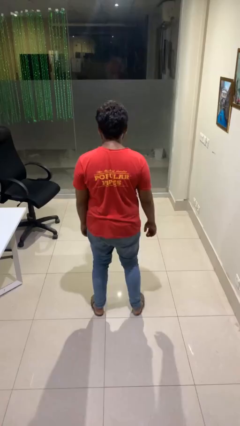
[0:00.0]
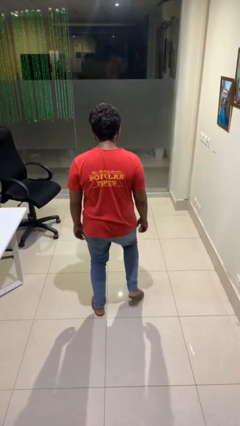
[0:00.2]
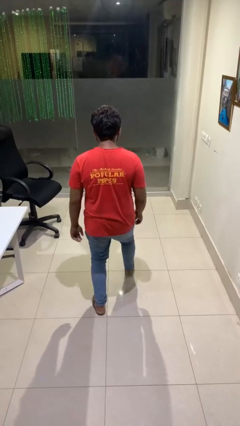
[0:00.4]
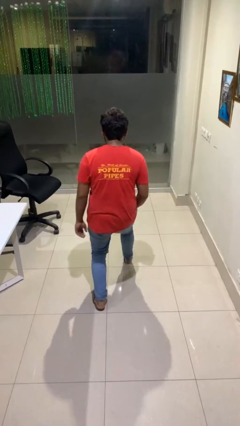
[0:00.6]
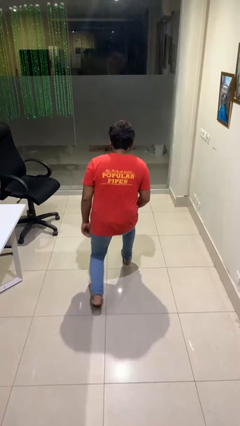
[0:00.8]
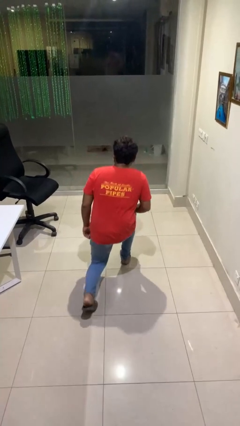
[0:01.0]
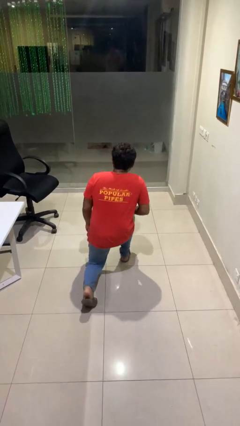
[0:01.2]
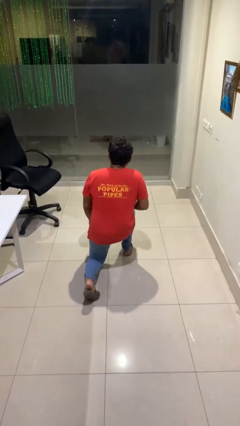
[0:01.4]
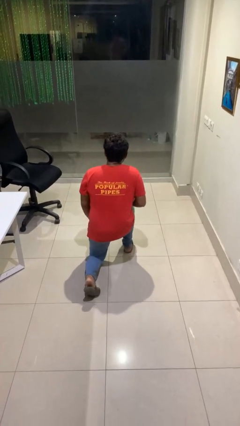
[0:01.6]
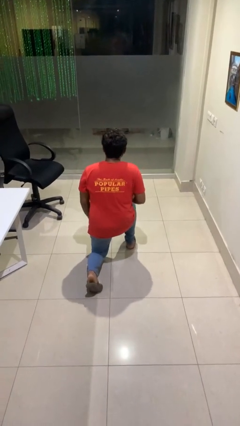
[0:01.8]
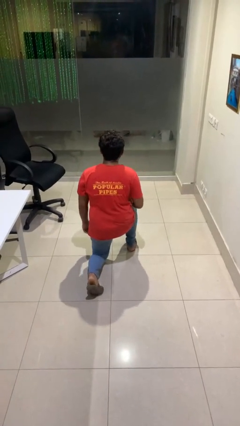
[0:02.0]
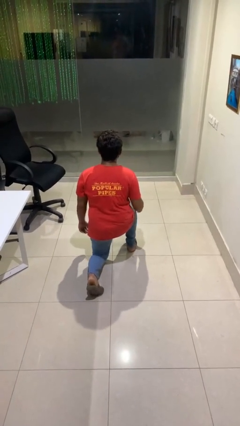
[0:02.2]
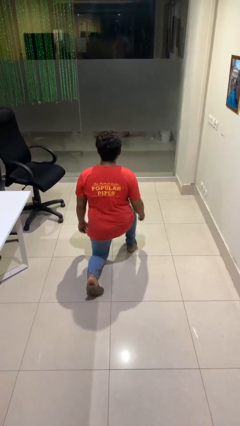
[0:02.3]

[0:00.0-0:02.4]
person kneels

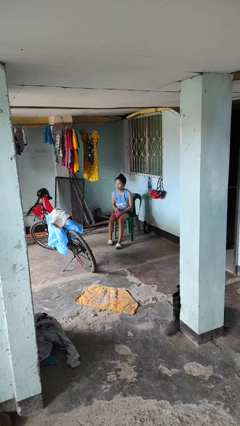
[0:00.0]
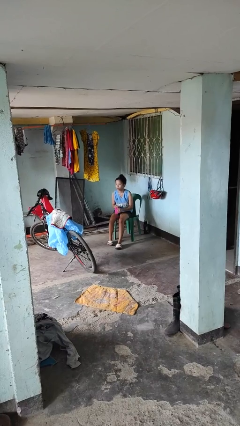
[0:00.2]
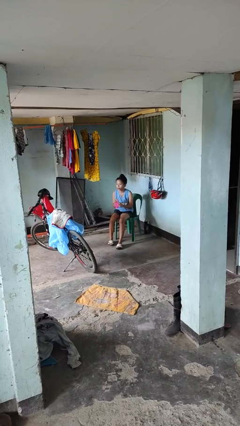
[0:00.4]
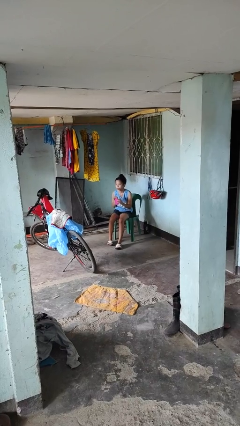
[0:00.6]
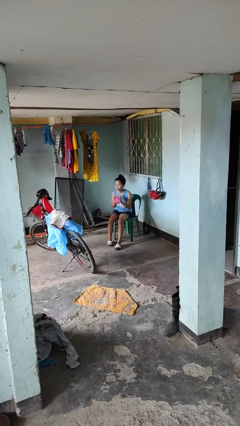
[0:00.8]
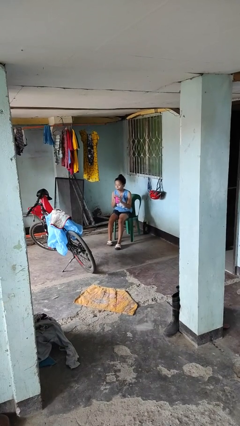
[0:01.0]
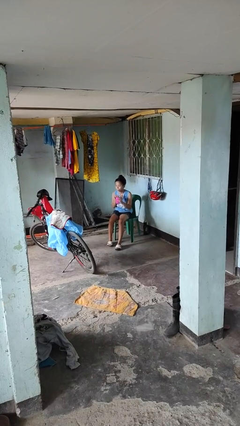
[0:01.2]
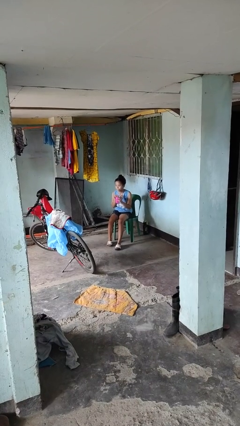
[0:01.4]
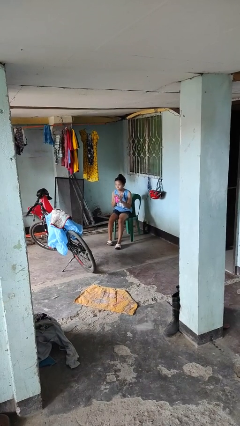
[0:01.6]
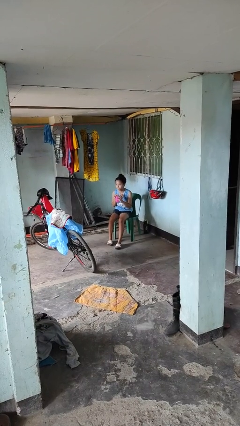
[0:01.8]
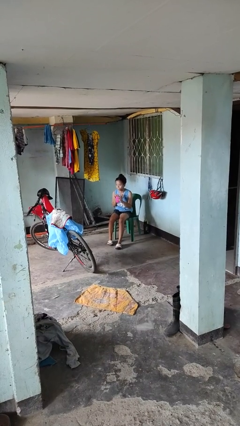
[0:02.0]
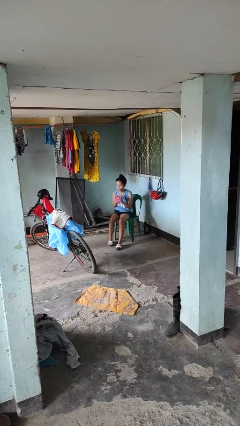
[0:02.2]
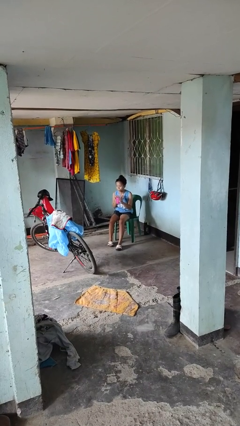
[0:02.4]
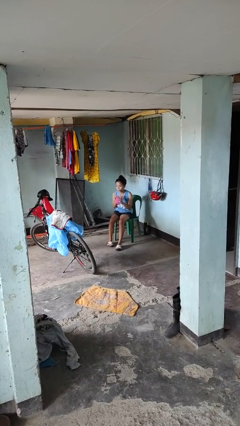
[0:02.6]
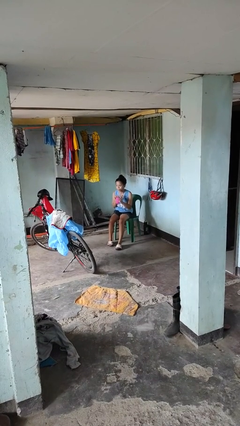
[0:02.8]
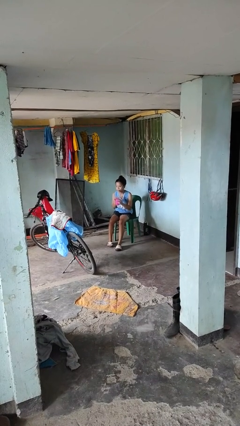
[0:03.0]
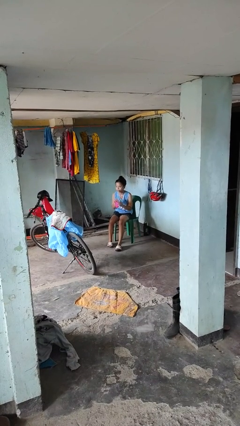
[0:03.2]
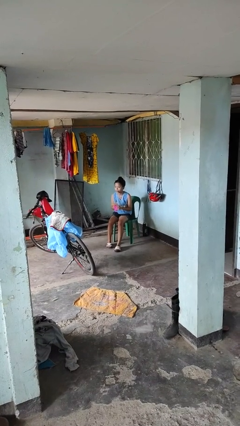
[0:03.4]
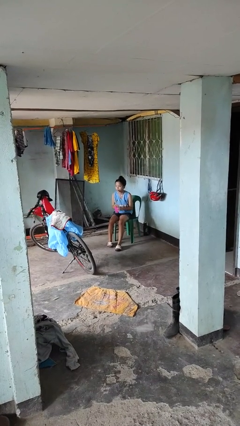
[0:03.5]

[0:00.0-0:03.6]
person drinks from straw

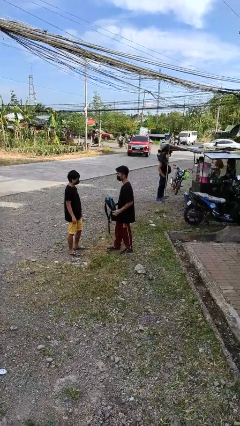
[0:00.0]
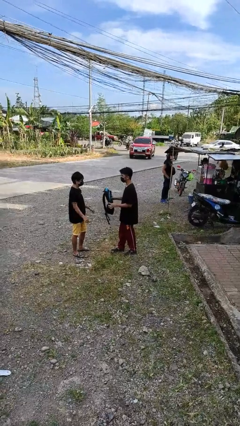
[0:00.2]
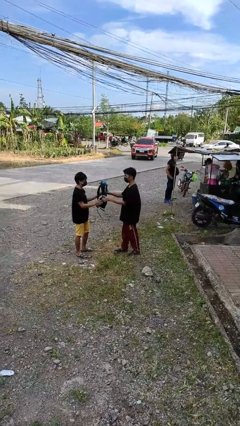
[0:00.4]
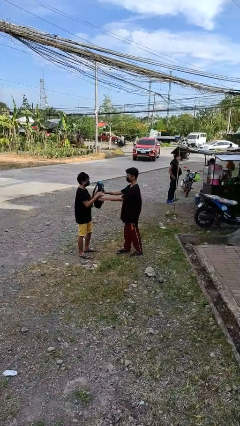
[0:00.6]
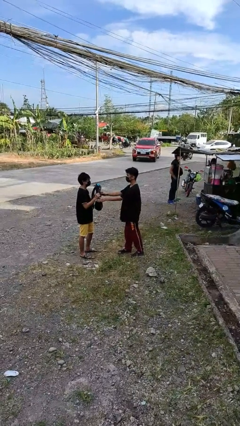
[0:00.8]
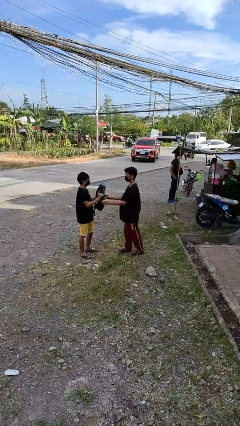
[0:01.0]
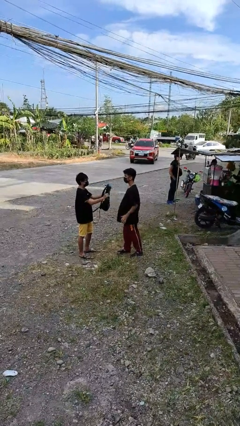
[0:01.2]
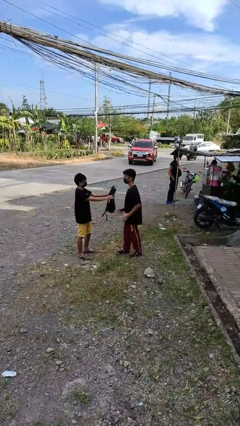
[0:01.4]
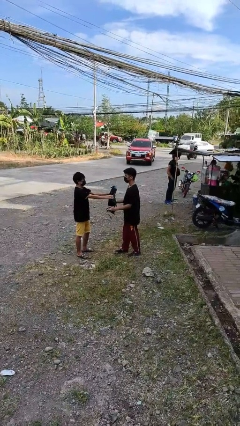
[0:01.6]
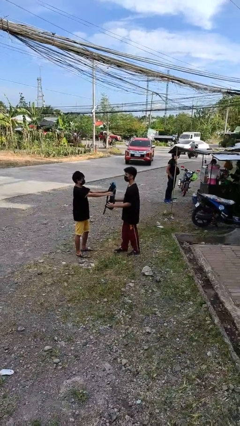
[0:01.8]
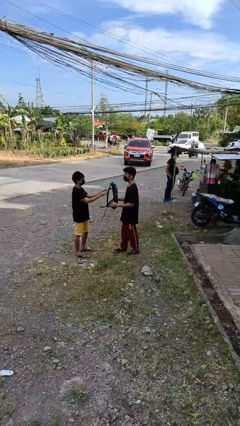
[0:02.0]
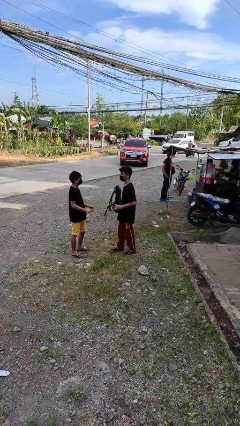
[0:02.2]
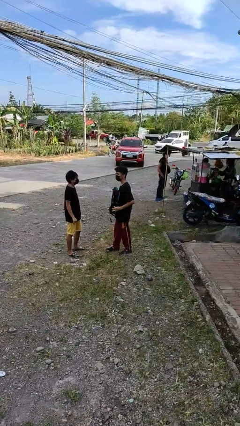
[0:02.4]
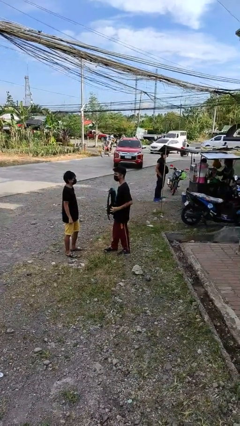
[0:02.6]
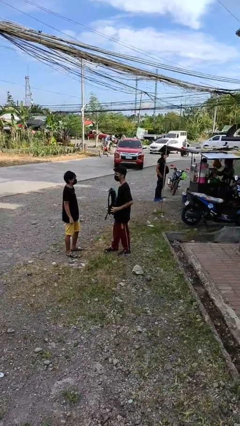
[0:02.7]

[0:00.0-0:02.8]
person transfers object to person

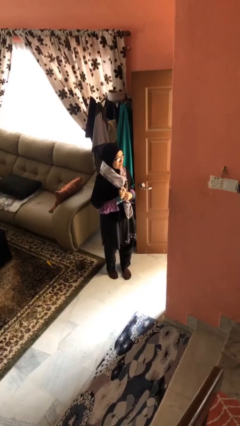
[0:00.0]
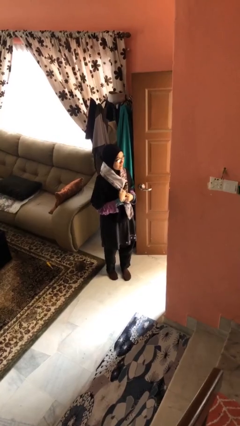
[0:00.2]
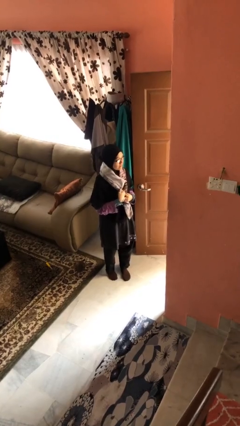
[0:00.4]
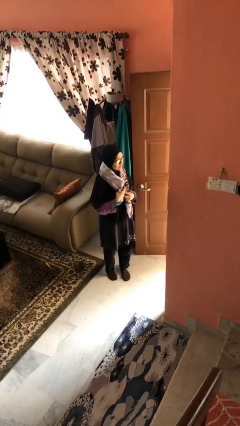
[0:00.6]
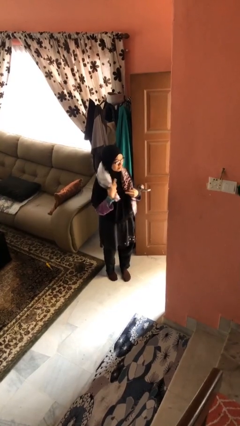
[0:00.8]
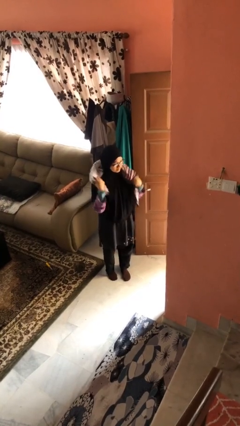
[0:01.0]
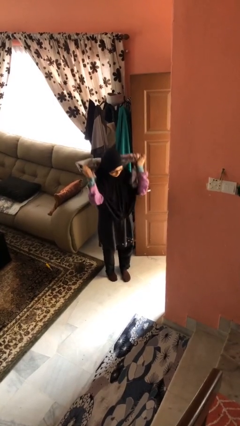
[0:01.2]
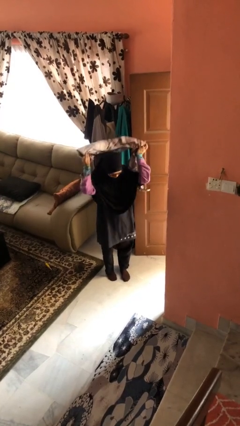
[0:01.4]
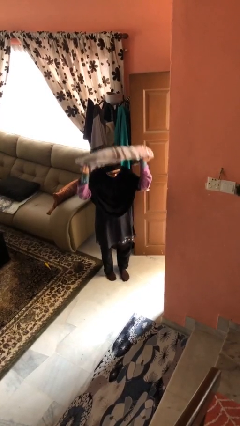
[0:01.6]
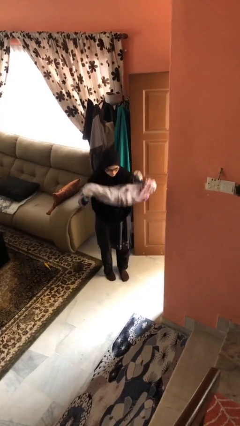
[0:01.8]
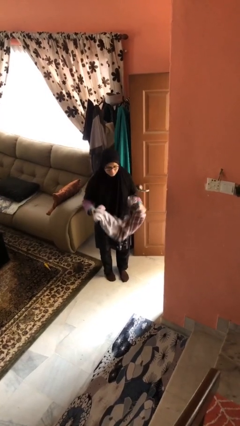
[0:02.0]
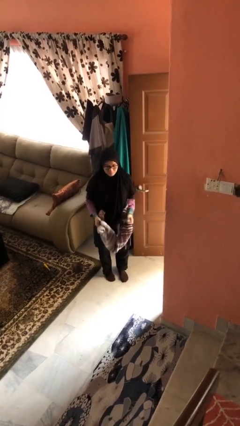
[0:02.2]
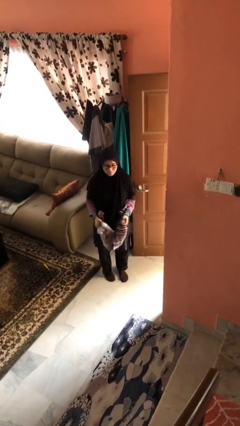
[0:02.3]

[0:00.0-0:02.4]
person takes off scarf

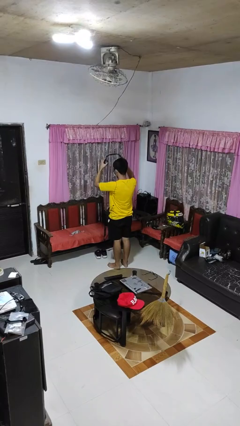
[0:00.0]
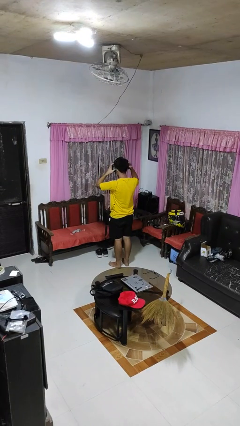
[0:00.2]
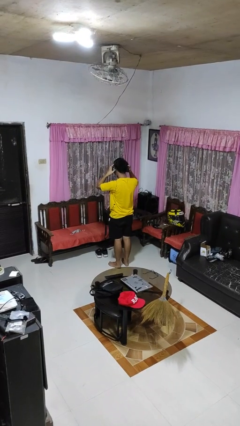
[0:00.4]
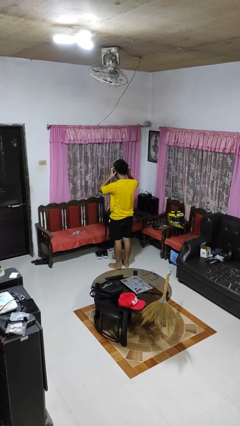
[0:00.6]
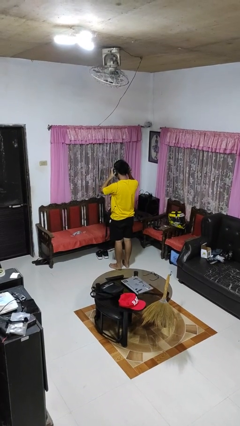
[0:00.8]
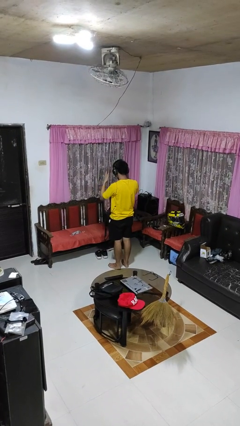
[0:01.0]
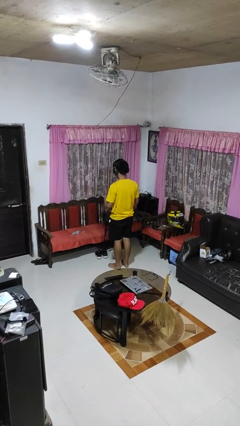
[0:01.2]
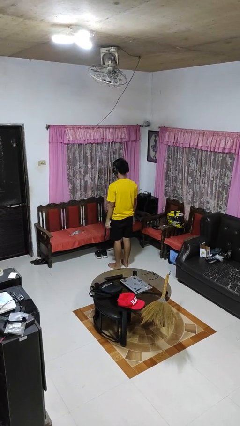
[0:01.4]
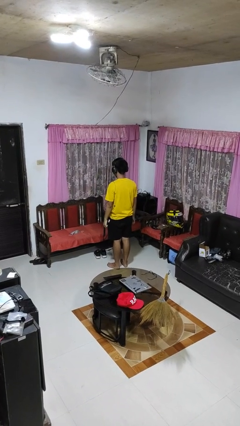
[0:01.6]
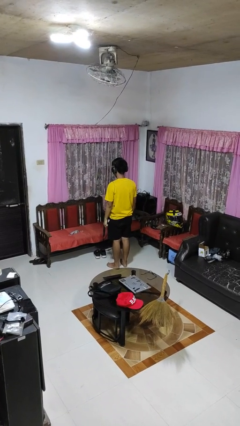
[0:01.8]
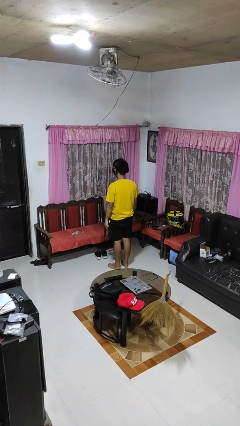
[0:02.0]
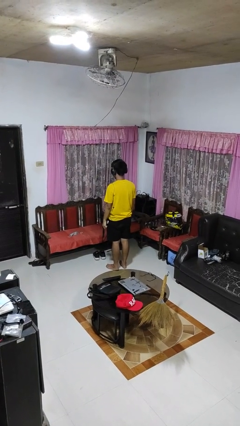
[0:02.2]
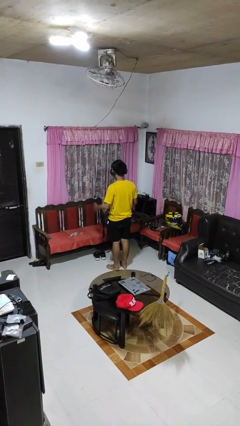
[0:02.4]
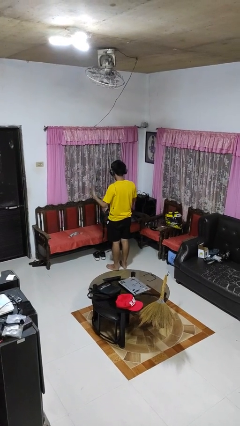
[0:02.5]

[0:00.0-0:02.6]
person puts on headphones

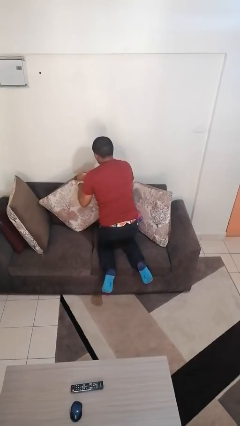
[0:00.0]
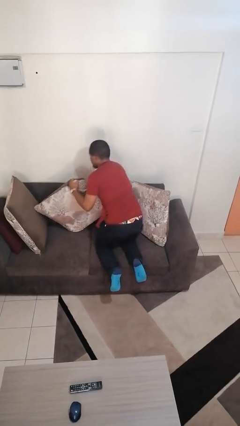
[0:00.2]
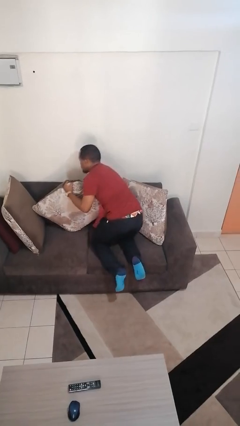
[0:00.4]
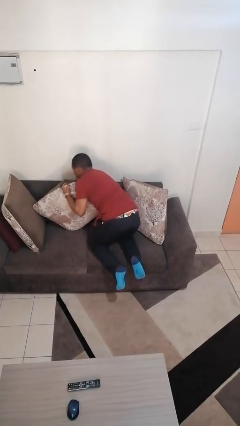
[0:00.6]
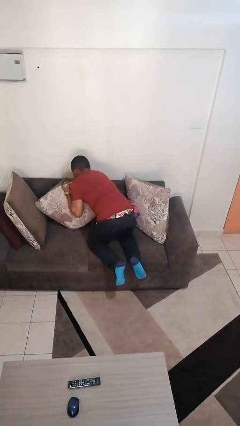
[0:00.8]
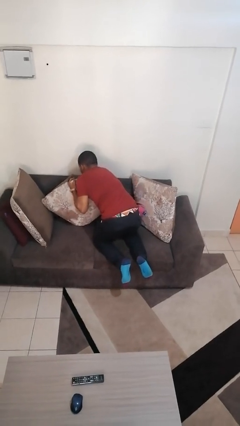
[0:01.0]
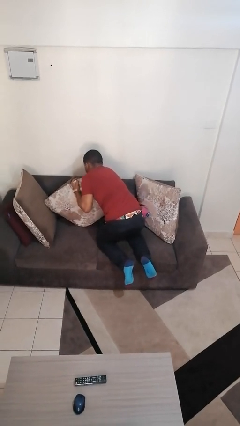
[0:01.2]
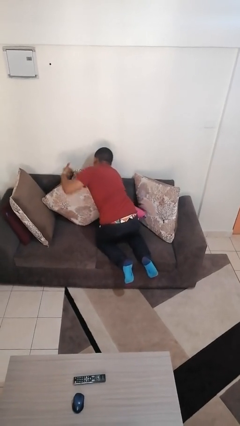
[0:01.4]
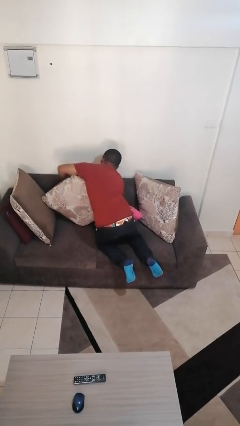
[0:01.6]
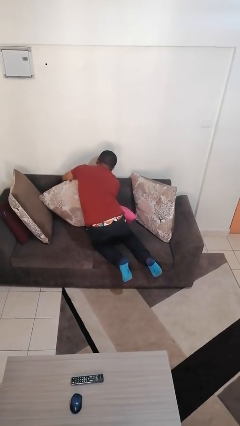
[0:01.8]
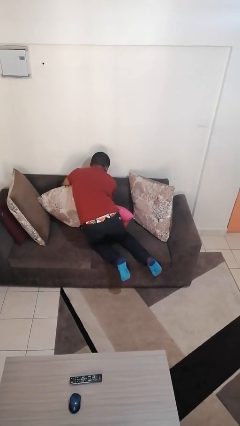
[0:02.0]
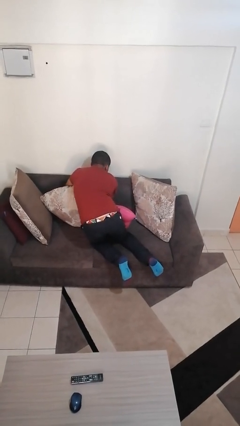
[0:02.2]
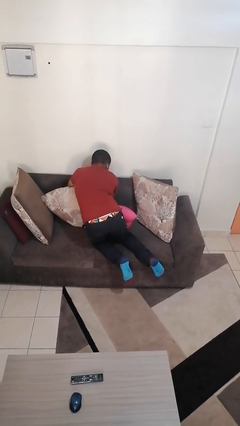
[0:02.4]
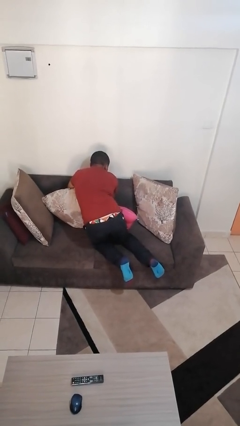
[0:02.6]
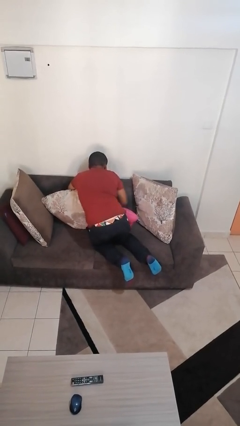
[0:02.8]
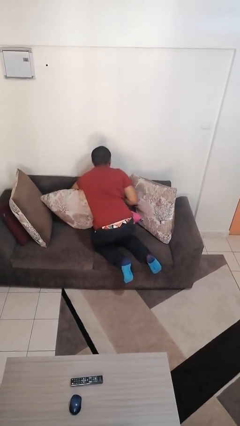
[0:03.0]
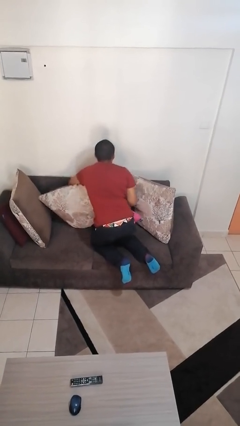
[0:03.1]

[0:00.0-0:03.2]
person searches in couch

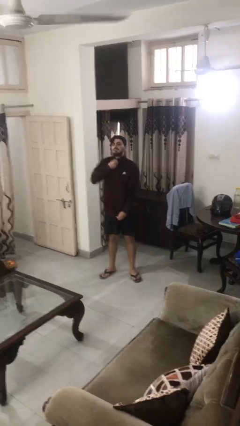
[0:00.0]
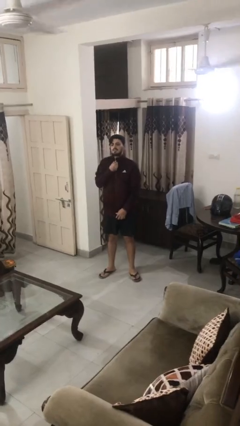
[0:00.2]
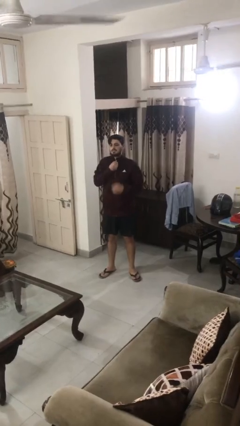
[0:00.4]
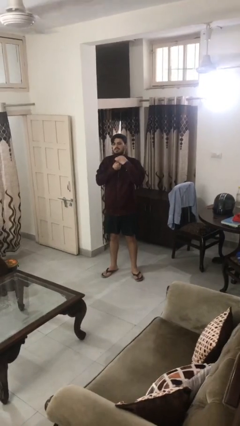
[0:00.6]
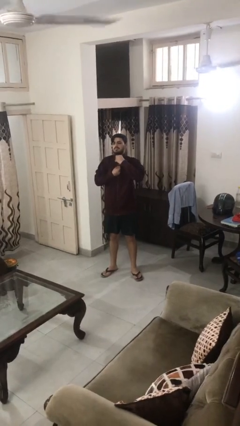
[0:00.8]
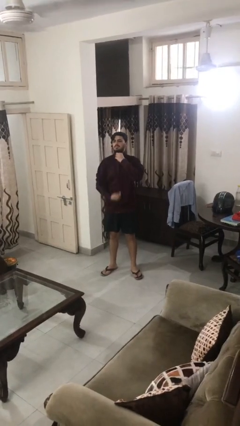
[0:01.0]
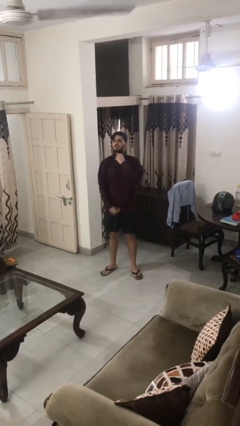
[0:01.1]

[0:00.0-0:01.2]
person unzips jacket
